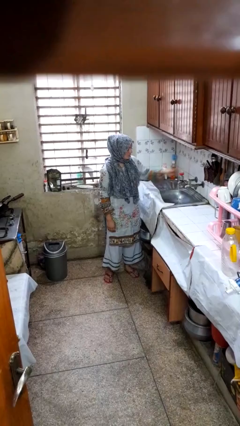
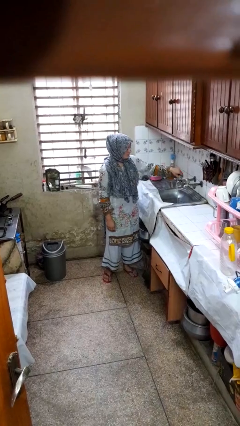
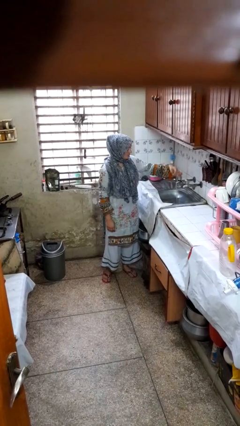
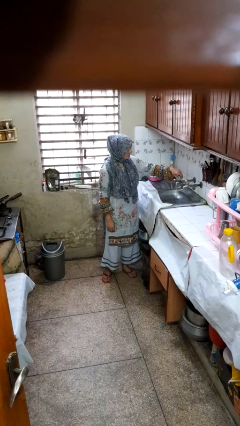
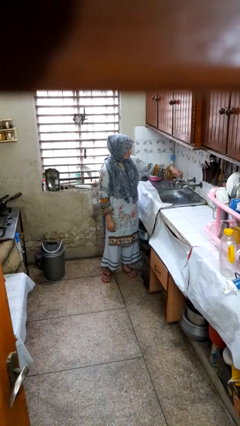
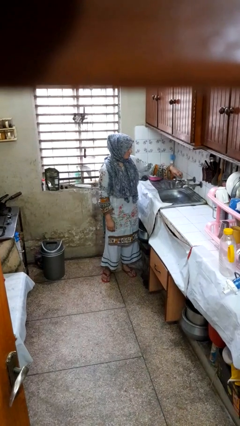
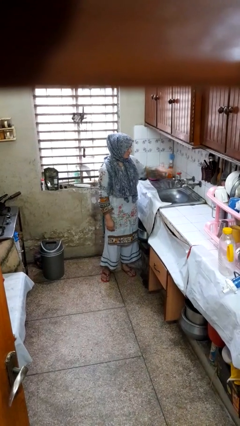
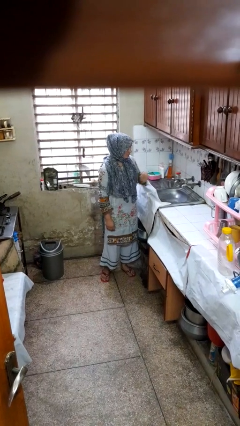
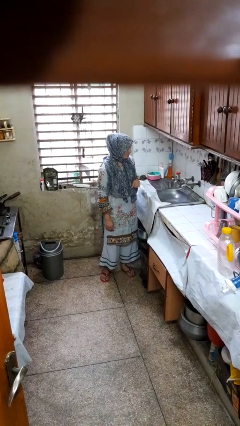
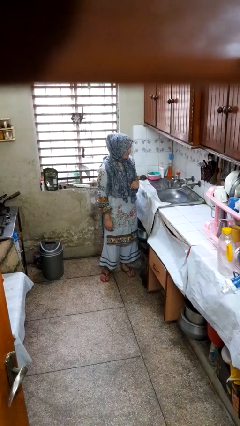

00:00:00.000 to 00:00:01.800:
person turns off faucet

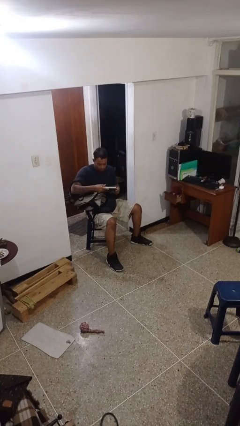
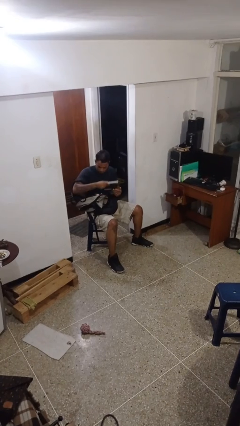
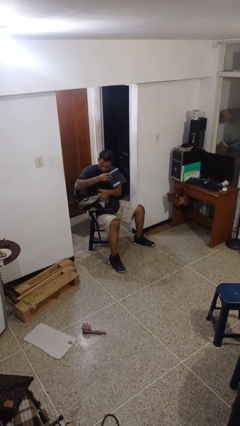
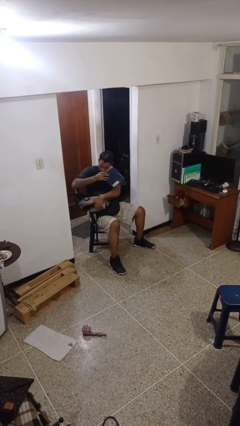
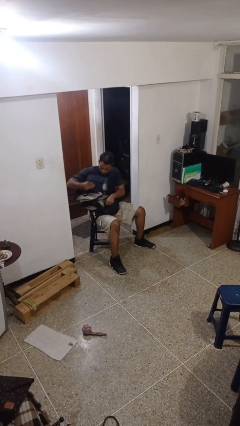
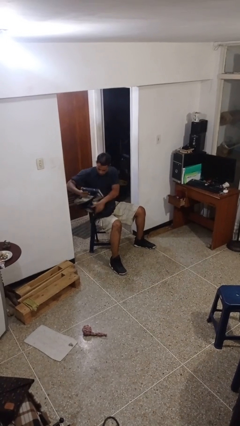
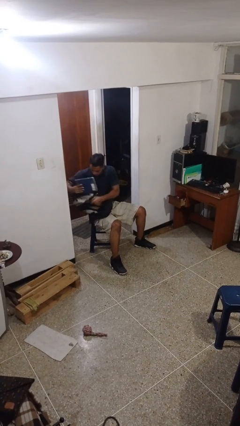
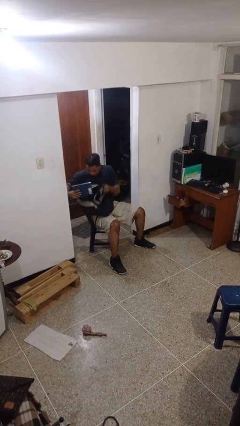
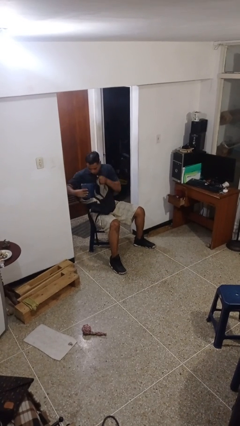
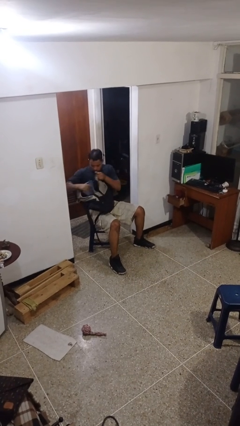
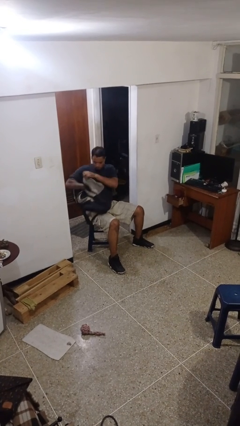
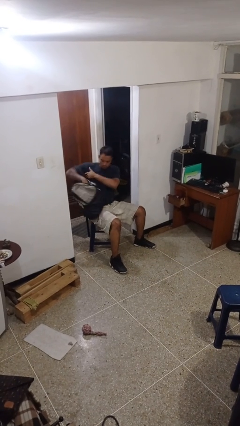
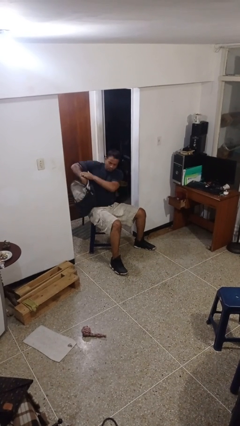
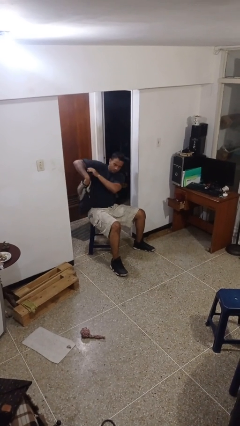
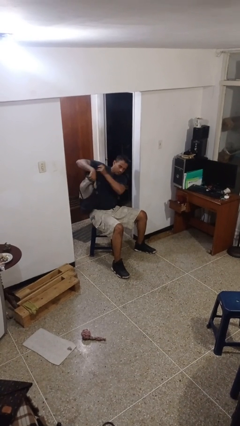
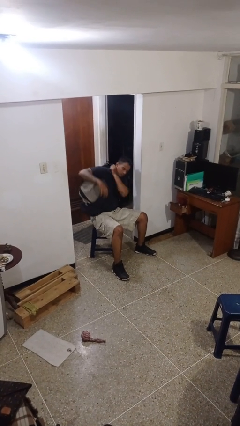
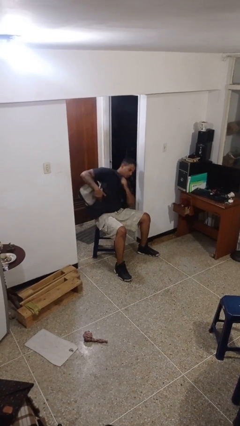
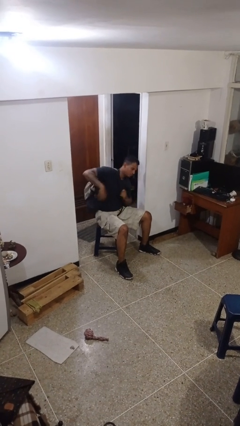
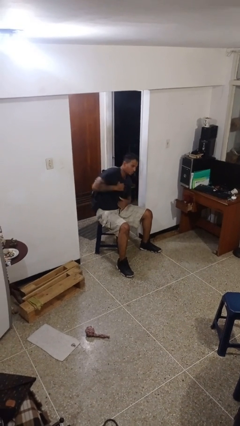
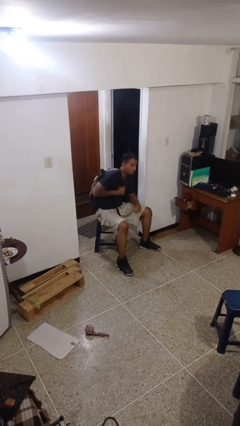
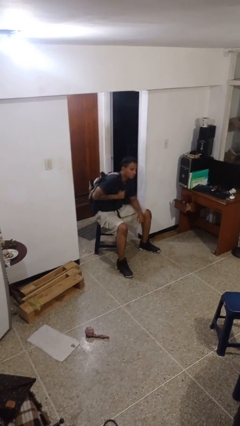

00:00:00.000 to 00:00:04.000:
person puts object into backpack

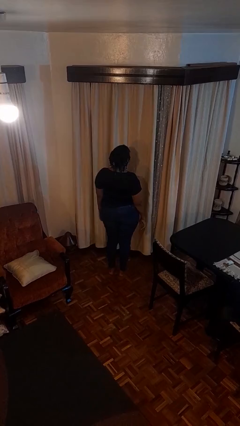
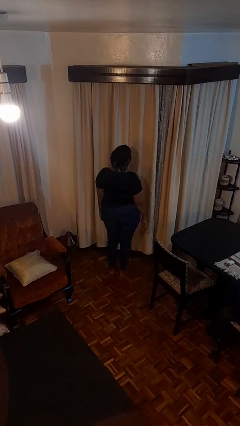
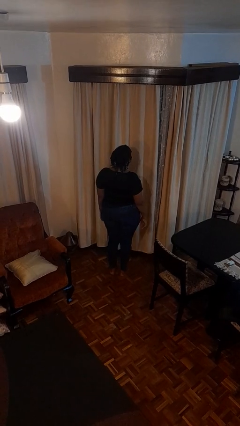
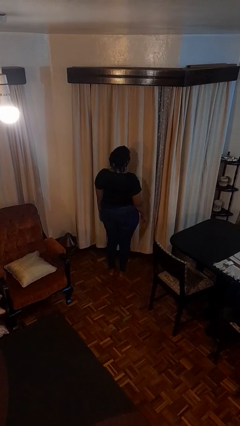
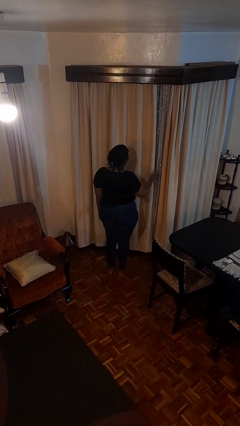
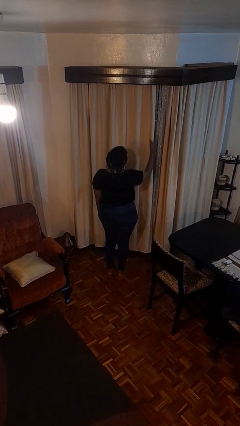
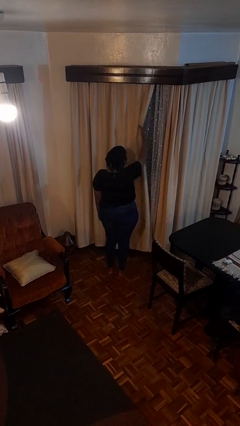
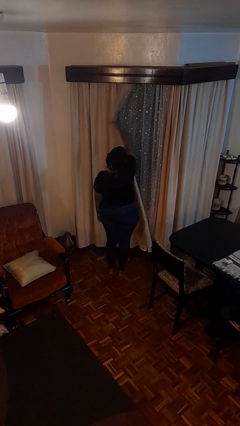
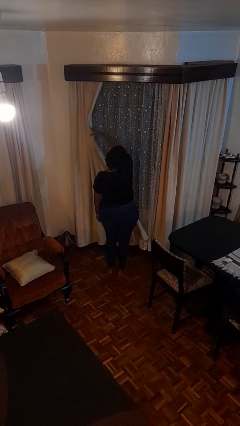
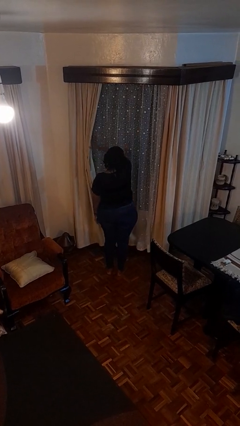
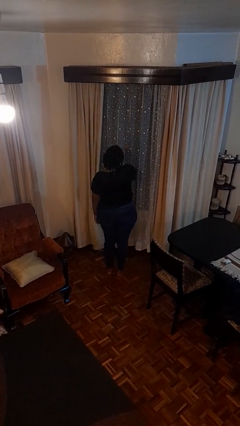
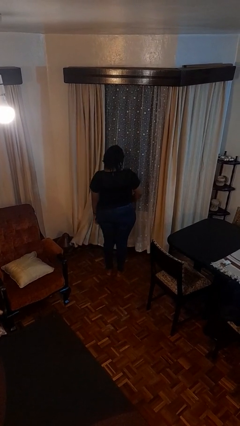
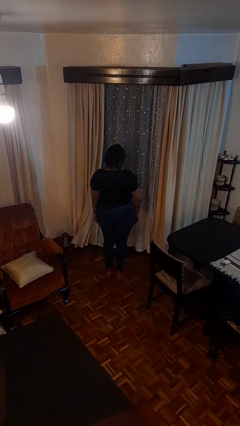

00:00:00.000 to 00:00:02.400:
person opens curtains

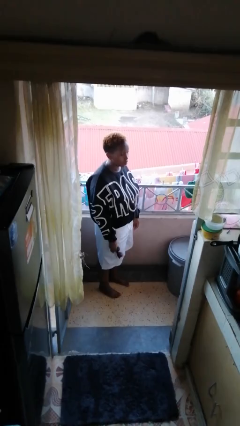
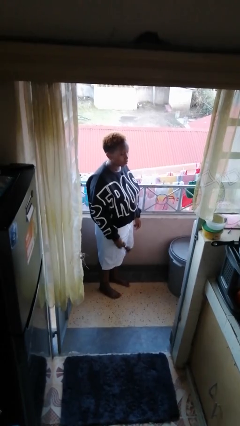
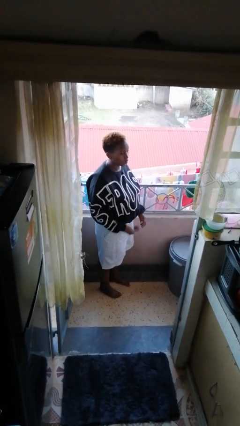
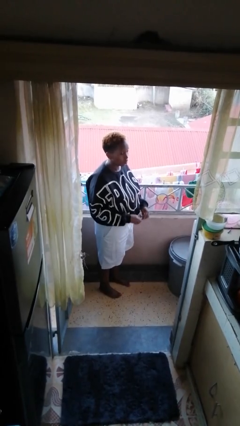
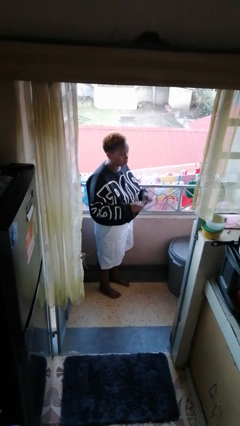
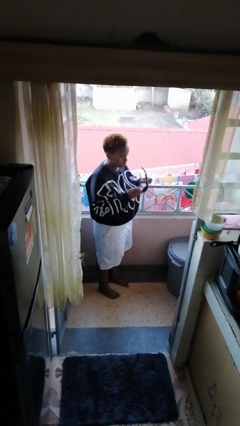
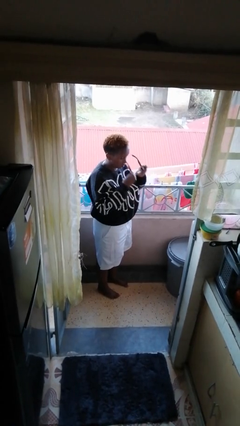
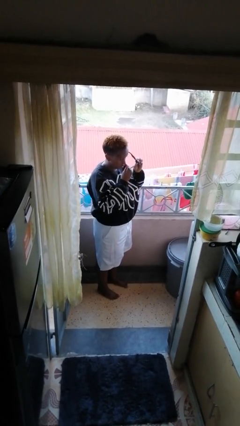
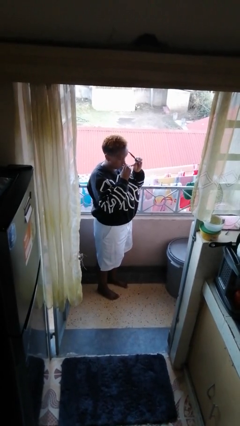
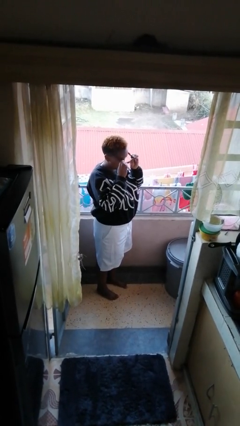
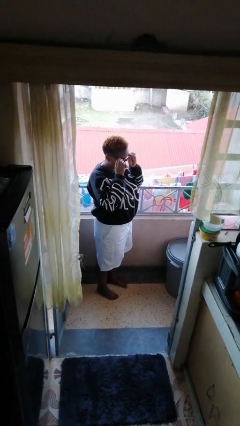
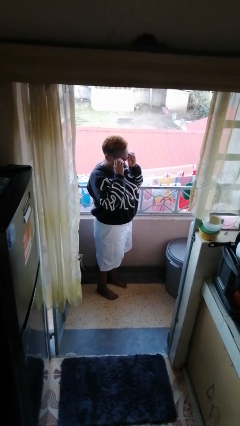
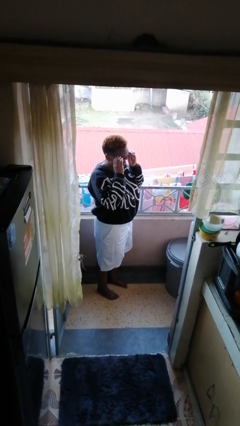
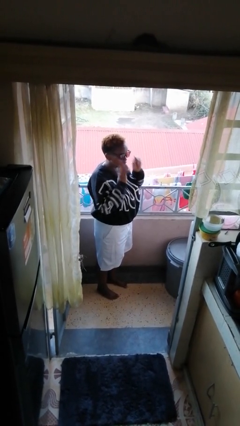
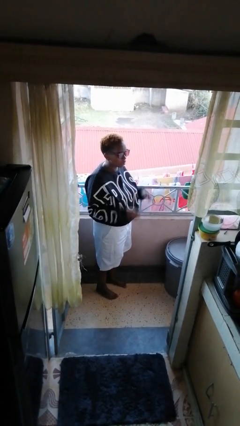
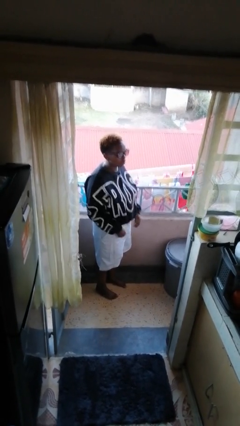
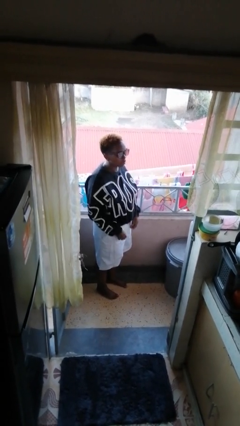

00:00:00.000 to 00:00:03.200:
person puts on sunglasses

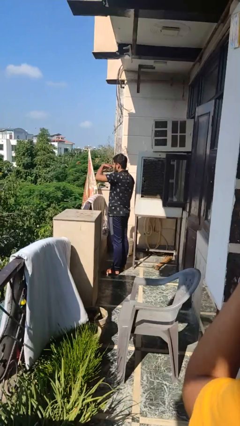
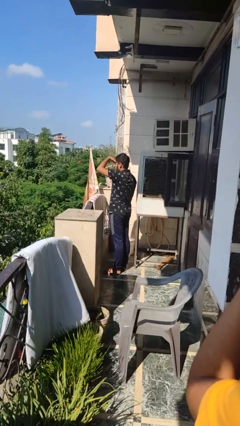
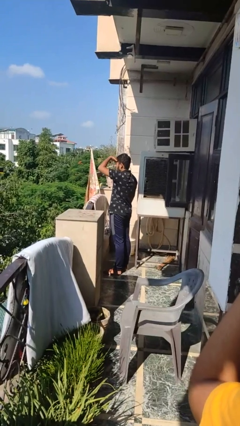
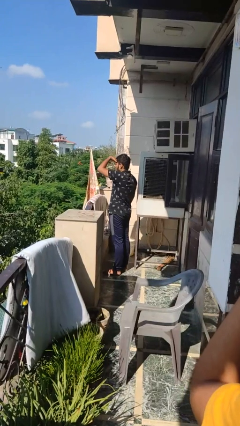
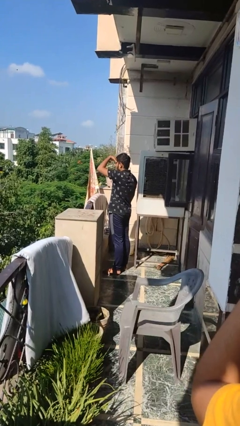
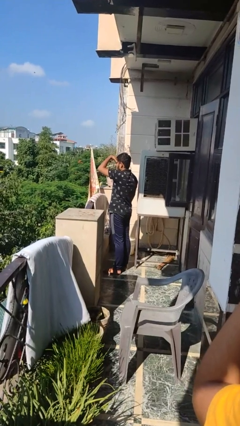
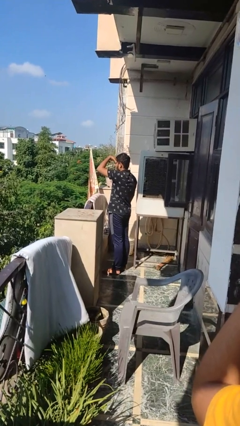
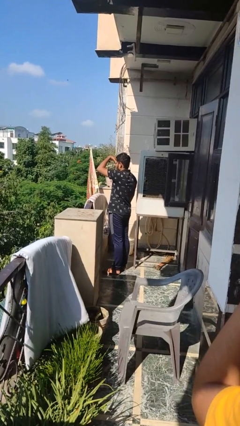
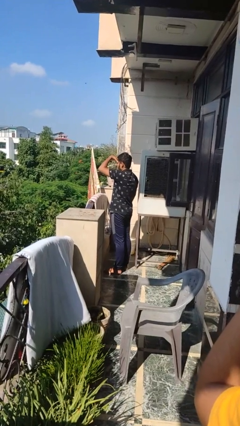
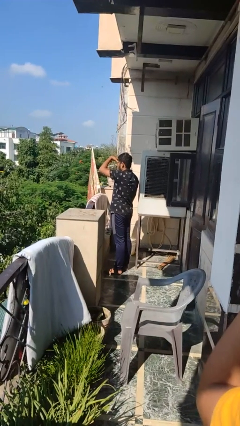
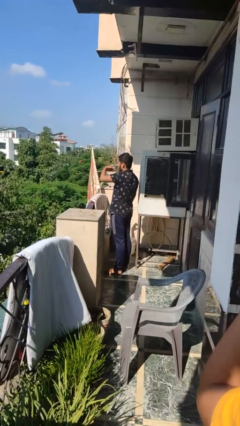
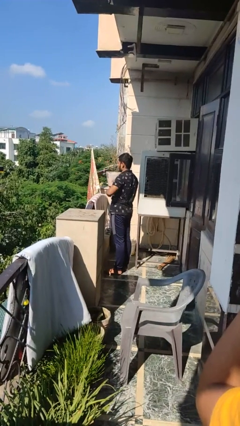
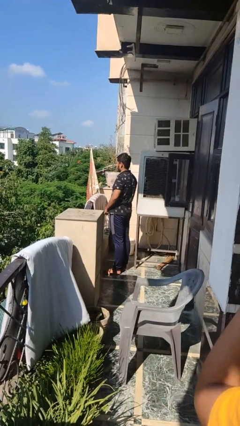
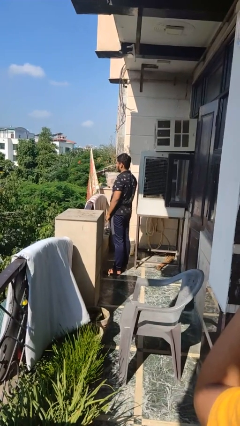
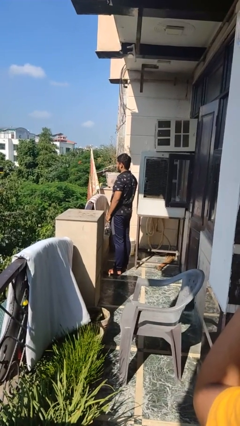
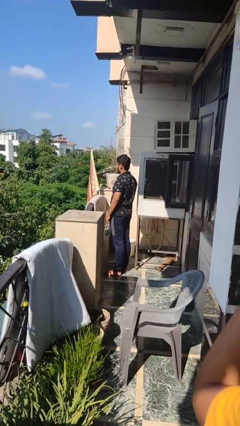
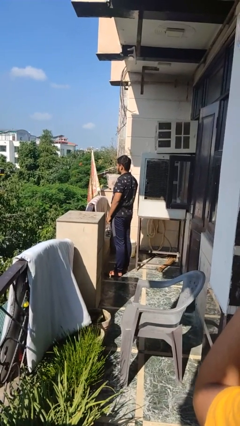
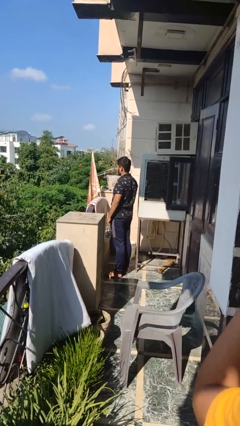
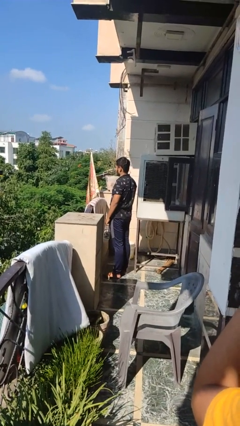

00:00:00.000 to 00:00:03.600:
person shades eyes

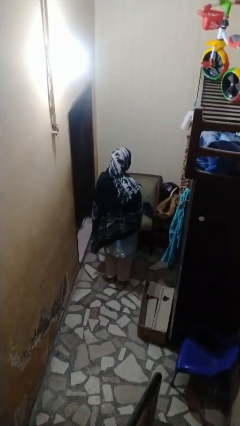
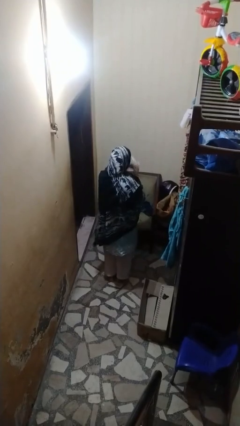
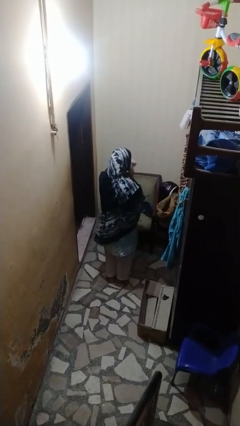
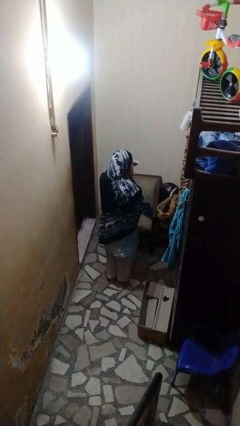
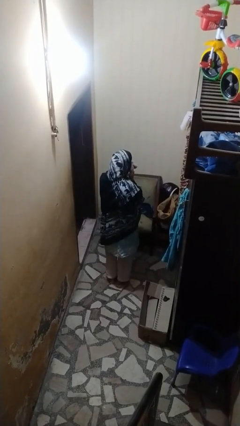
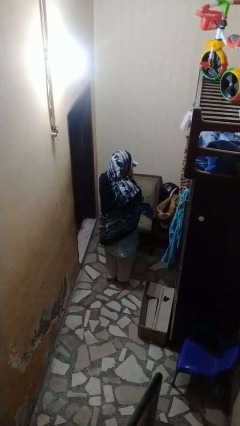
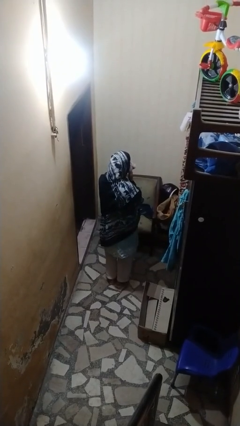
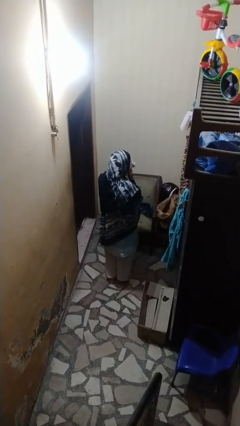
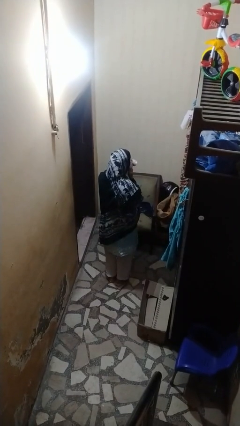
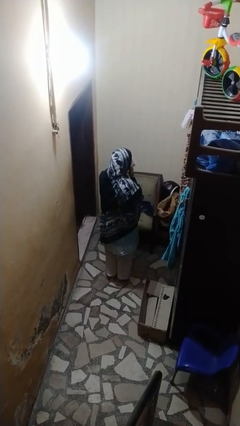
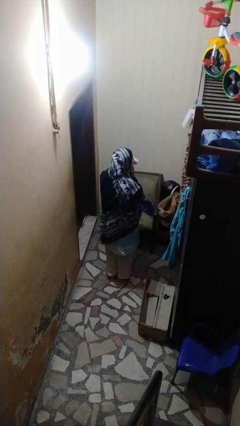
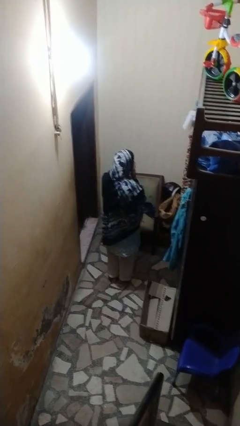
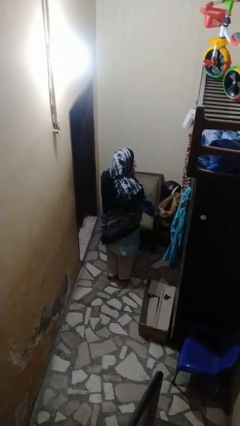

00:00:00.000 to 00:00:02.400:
person blows nose

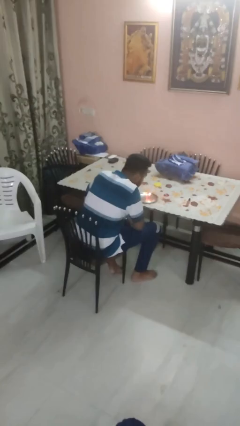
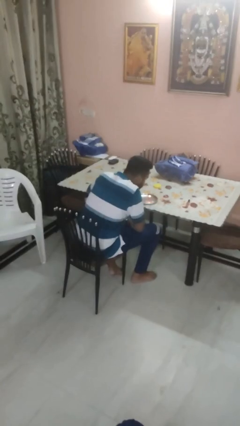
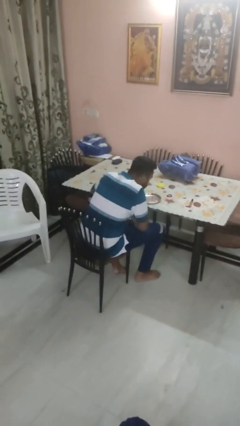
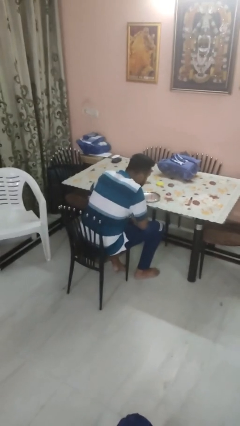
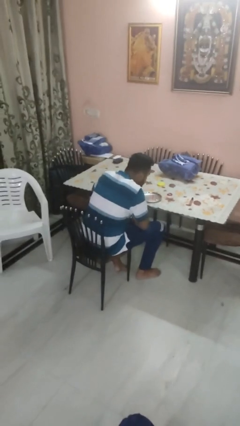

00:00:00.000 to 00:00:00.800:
person extinguishes candle
